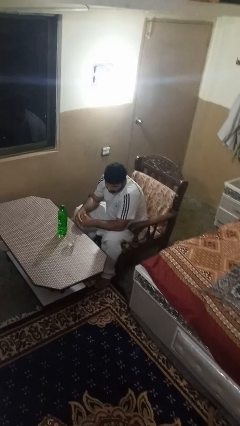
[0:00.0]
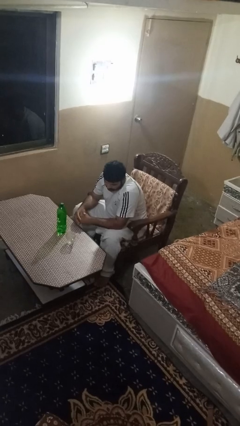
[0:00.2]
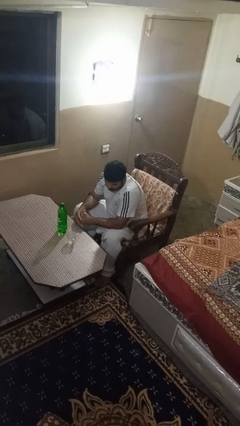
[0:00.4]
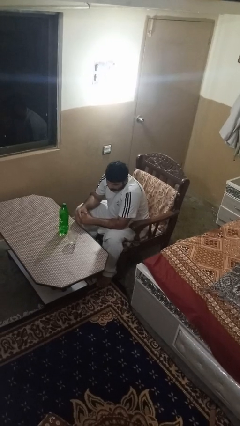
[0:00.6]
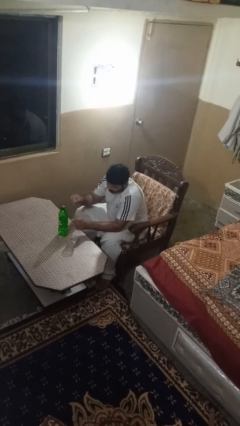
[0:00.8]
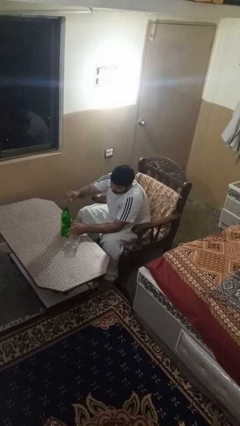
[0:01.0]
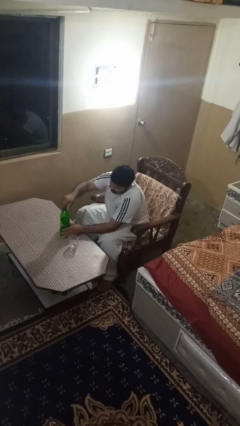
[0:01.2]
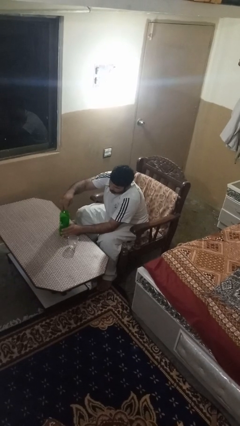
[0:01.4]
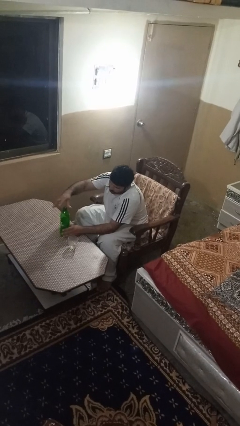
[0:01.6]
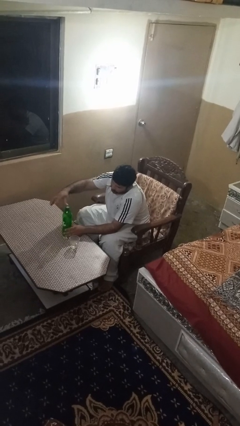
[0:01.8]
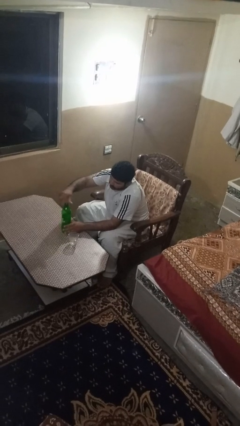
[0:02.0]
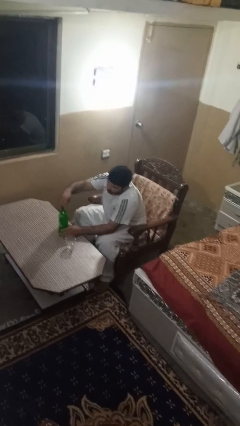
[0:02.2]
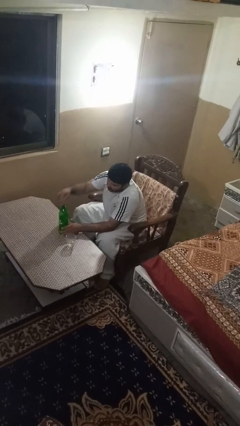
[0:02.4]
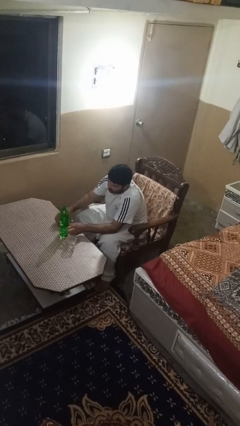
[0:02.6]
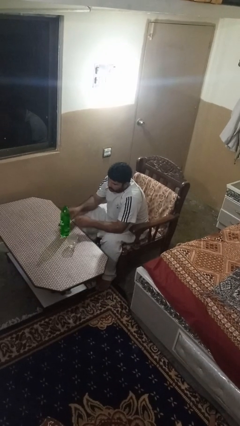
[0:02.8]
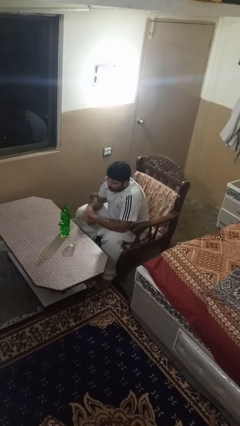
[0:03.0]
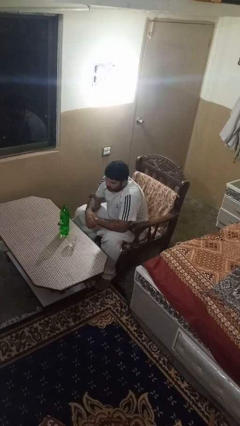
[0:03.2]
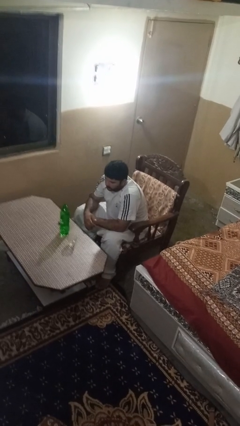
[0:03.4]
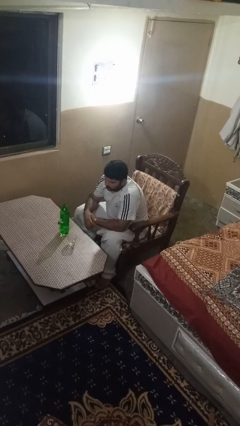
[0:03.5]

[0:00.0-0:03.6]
person unscrews lid from bottle

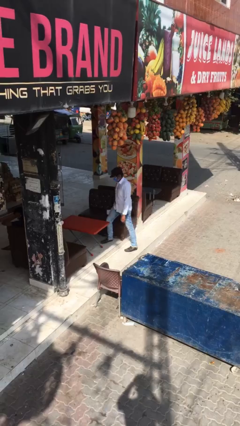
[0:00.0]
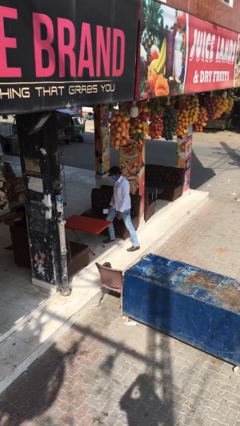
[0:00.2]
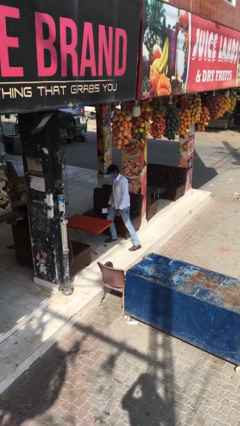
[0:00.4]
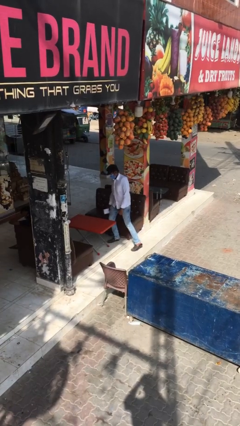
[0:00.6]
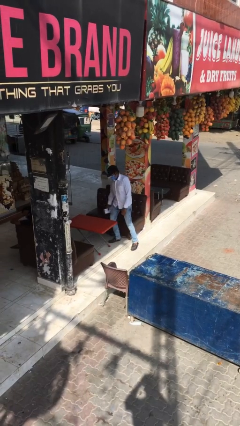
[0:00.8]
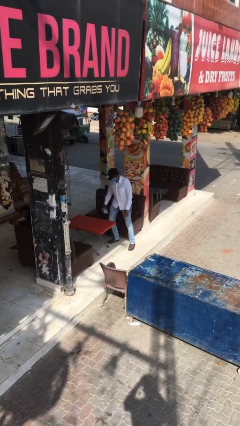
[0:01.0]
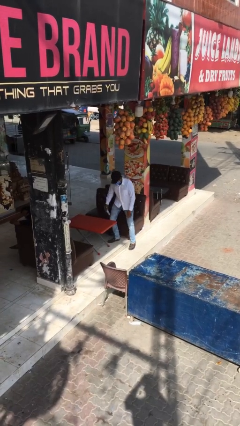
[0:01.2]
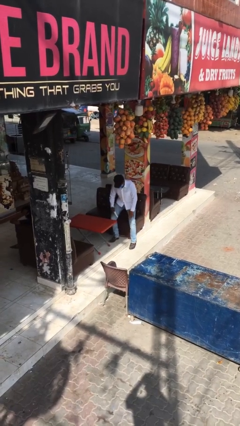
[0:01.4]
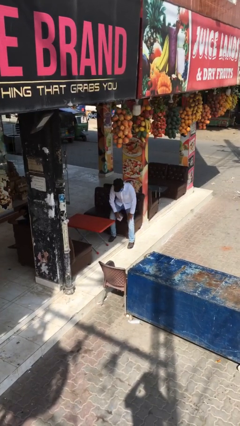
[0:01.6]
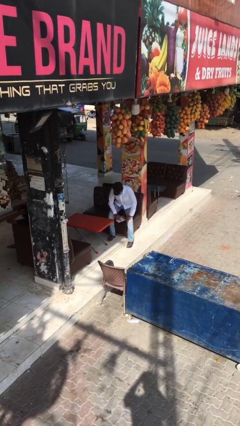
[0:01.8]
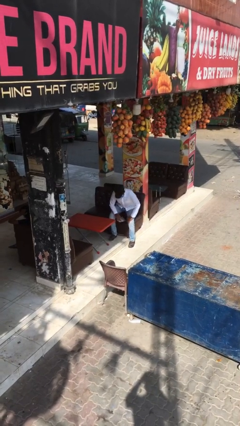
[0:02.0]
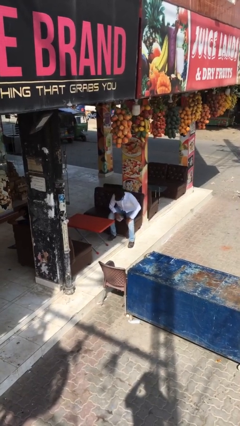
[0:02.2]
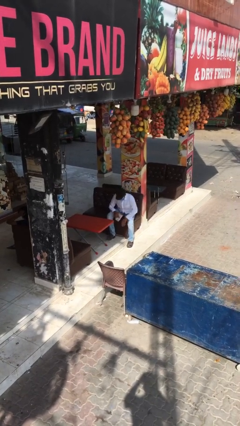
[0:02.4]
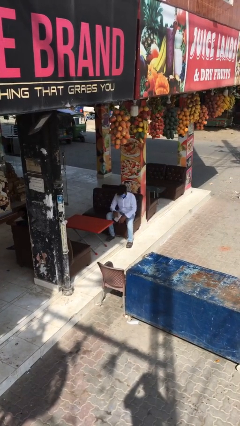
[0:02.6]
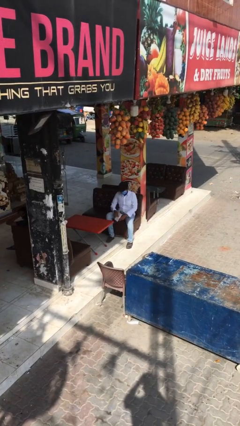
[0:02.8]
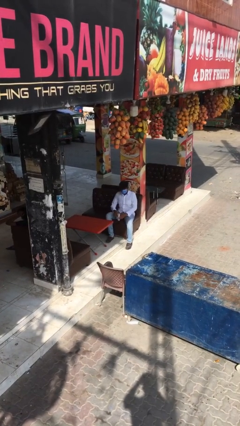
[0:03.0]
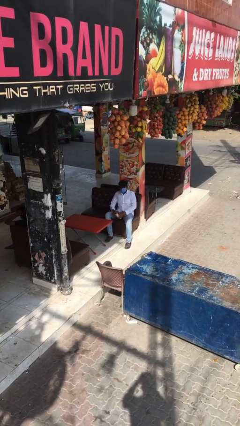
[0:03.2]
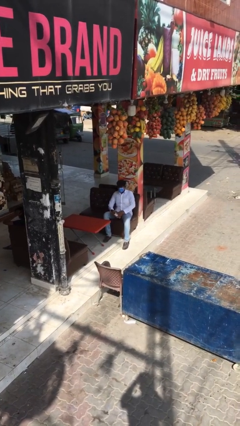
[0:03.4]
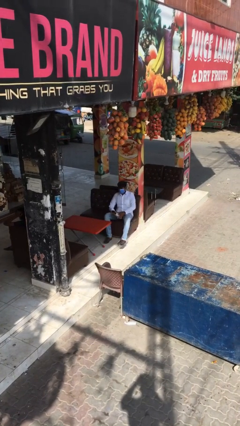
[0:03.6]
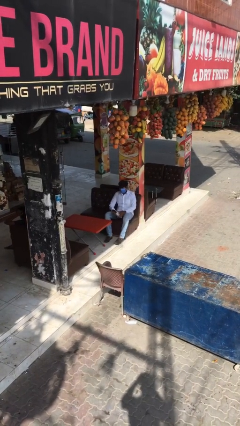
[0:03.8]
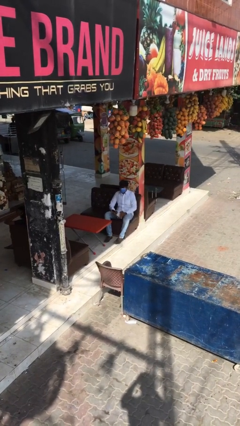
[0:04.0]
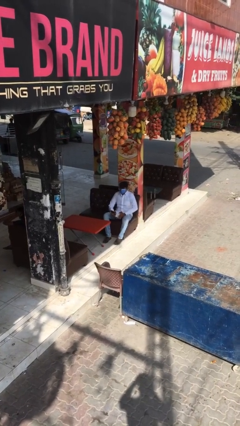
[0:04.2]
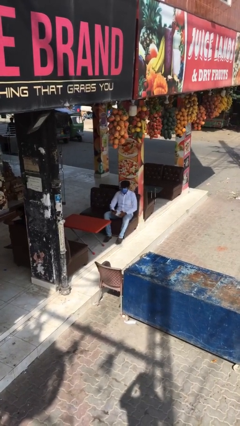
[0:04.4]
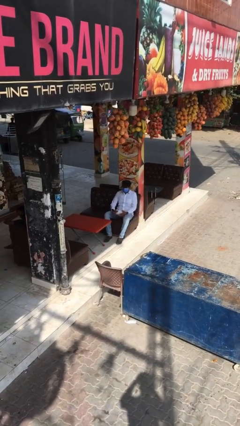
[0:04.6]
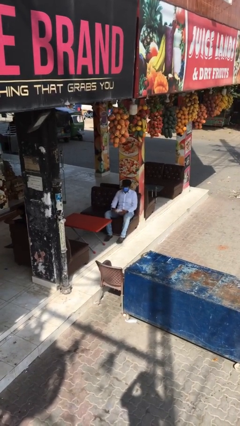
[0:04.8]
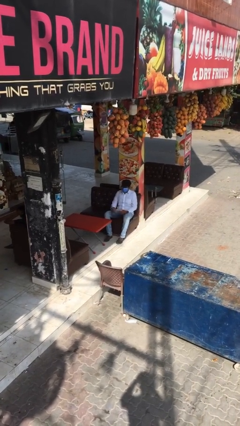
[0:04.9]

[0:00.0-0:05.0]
person sits down

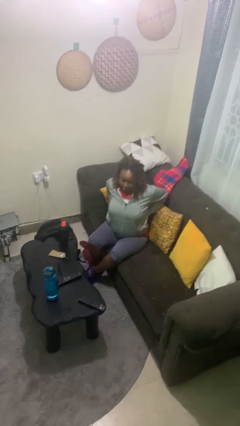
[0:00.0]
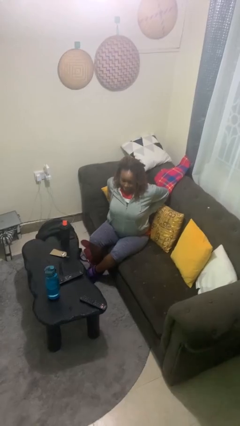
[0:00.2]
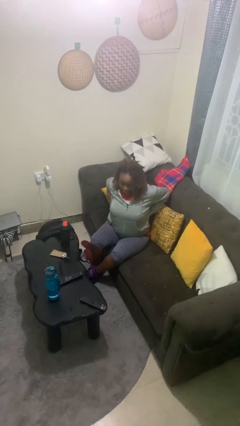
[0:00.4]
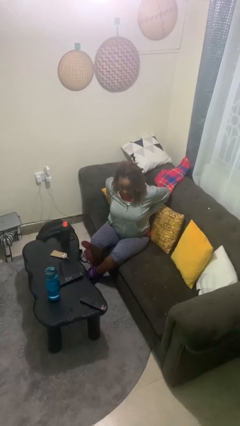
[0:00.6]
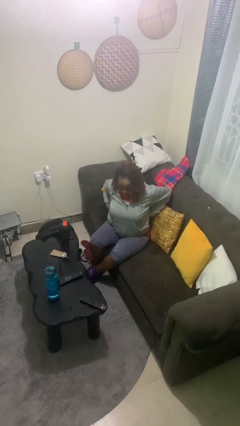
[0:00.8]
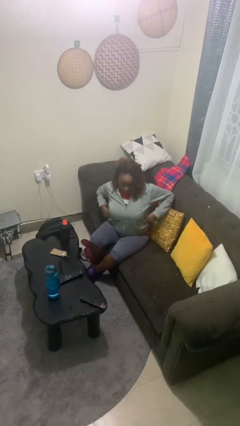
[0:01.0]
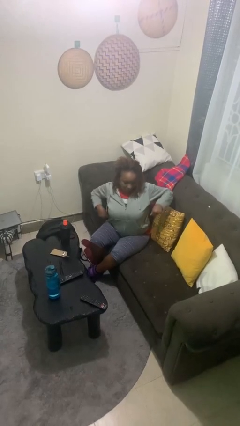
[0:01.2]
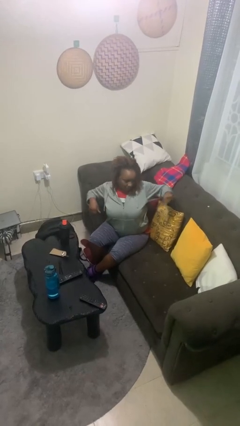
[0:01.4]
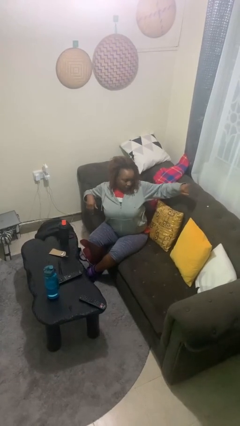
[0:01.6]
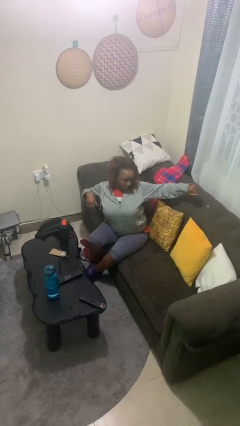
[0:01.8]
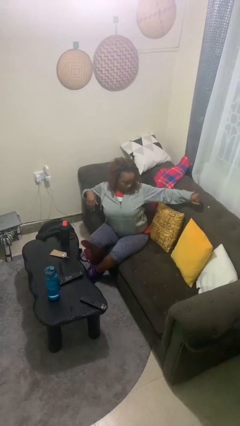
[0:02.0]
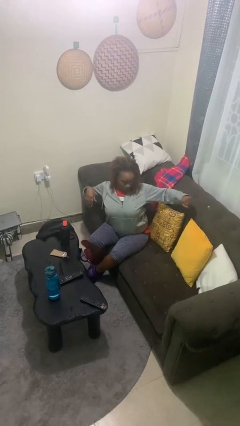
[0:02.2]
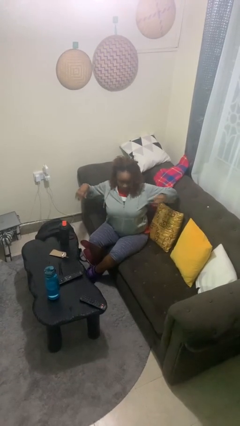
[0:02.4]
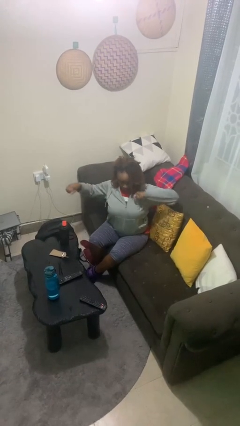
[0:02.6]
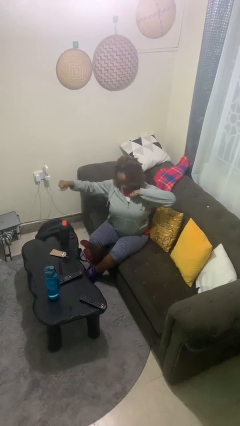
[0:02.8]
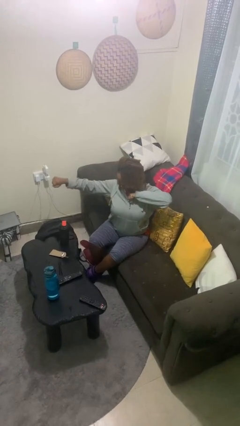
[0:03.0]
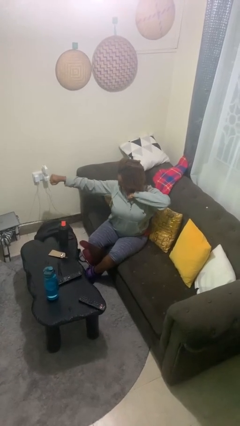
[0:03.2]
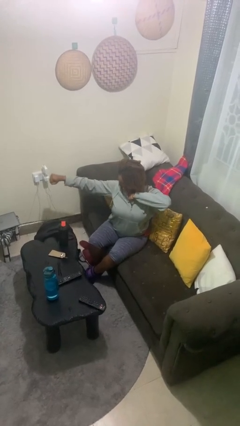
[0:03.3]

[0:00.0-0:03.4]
person stretches arms to side

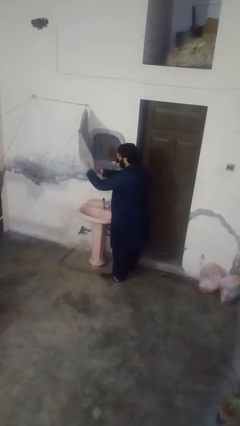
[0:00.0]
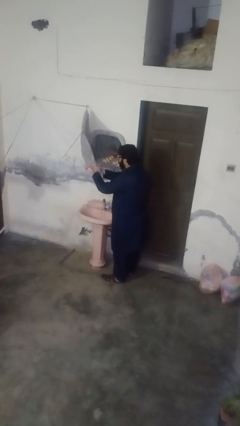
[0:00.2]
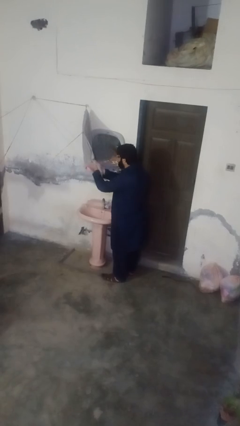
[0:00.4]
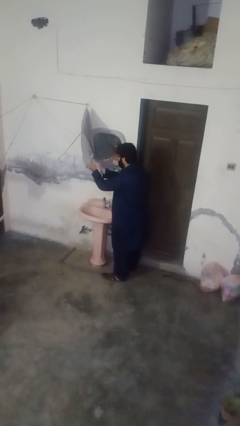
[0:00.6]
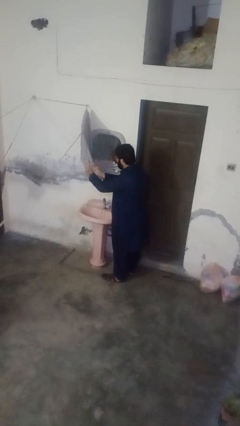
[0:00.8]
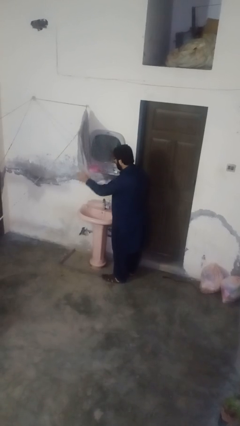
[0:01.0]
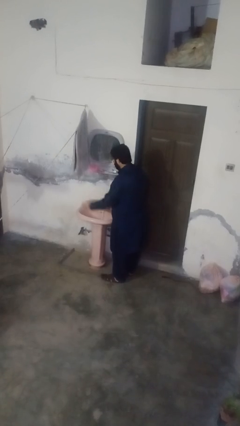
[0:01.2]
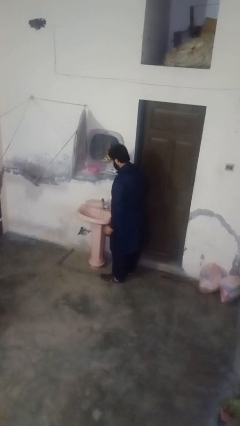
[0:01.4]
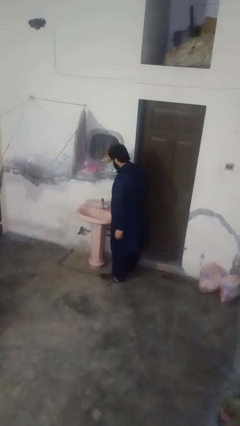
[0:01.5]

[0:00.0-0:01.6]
person dries hands with towel

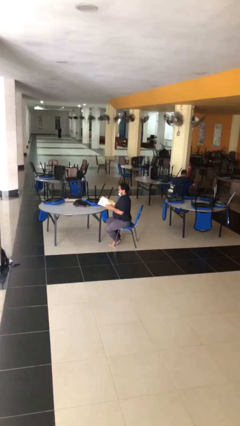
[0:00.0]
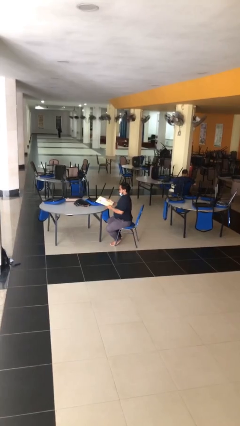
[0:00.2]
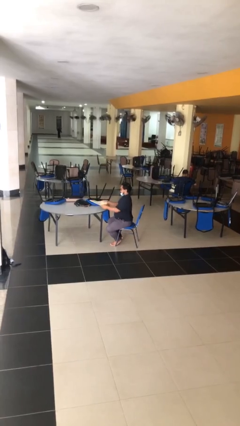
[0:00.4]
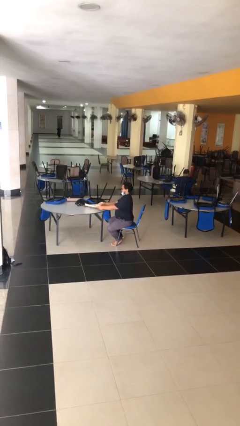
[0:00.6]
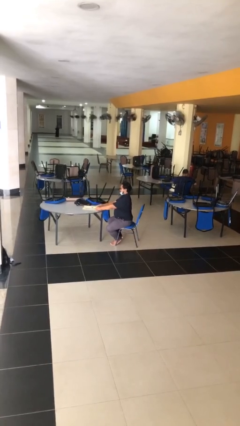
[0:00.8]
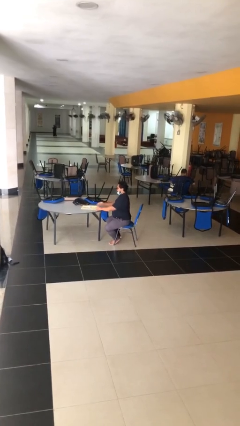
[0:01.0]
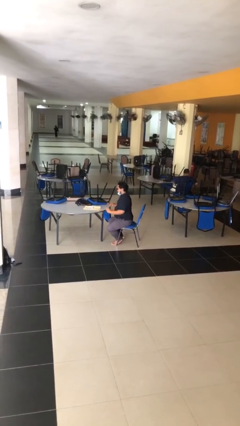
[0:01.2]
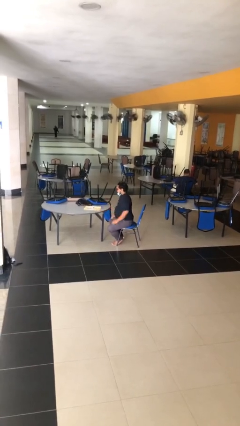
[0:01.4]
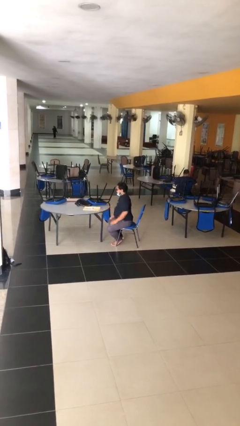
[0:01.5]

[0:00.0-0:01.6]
person puts down object on table

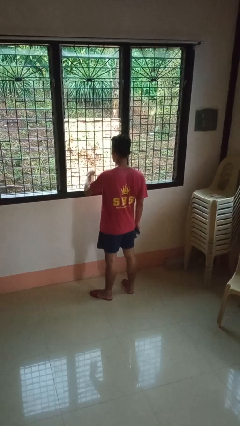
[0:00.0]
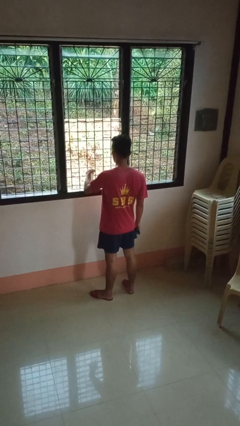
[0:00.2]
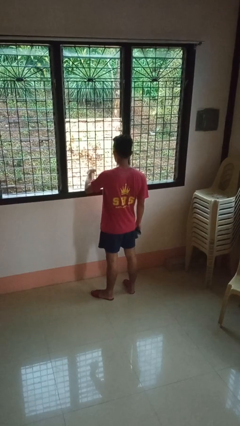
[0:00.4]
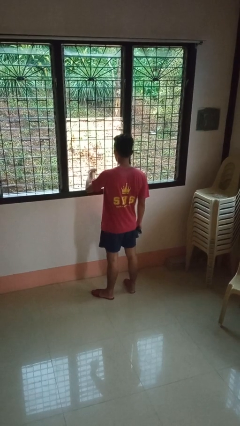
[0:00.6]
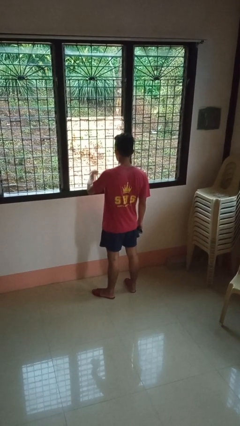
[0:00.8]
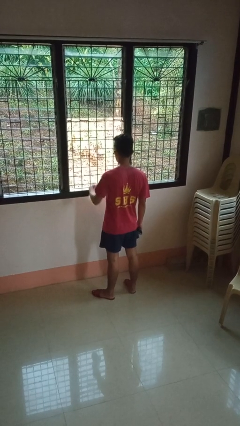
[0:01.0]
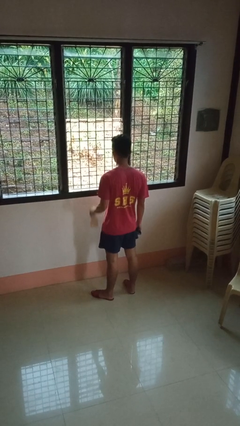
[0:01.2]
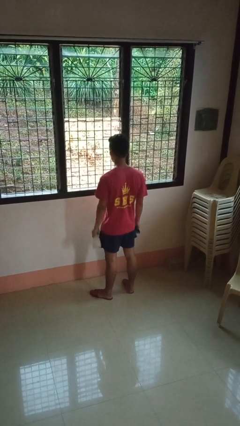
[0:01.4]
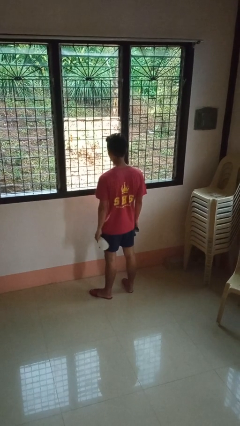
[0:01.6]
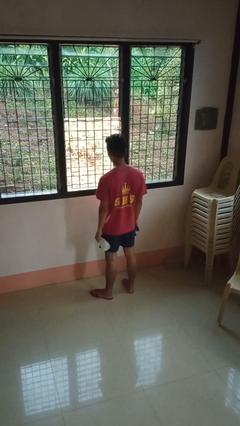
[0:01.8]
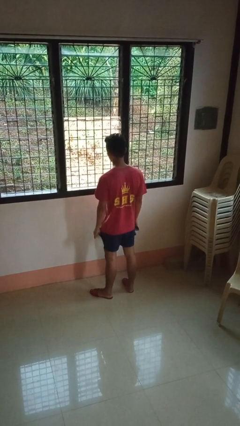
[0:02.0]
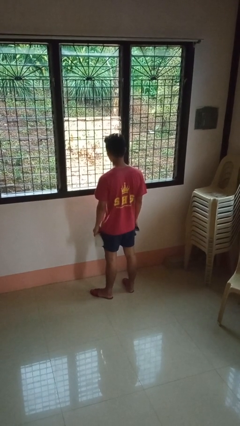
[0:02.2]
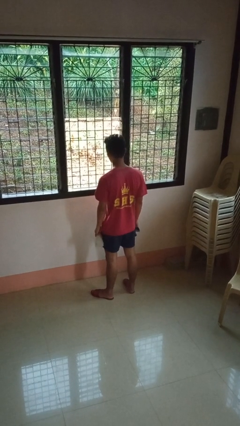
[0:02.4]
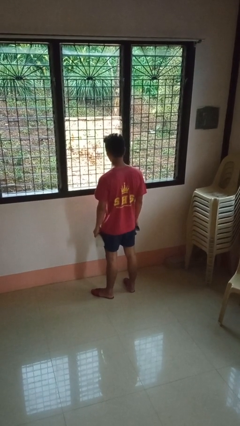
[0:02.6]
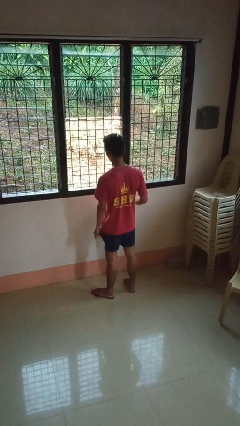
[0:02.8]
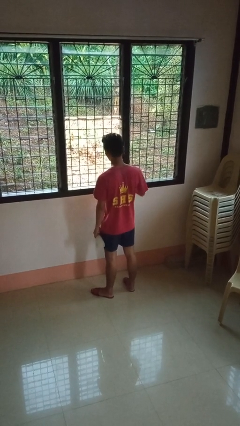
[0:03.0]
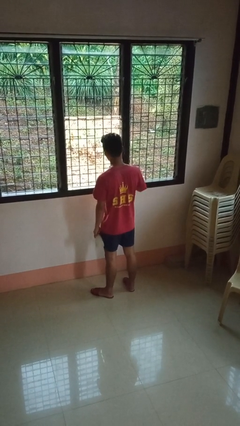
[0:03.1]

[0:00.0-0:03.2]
person sprays from bottle
